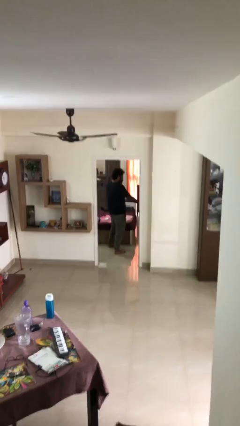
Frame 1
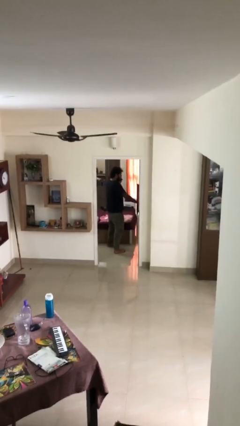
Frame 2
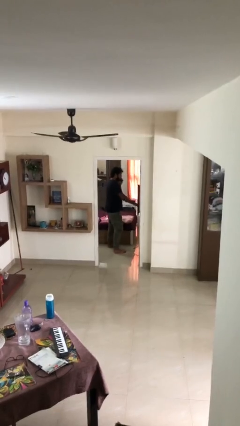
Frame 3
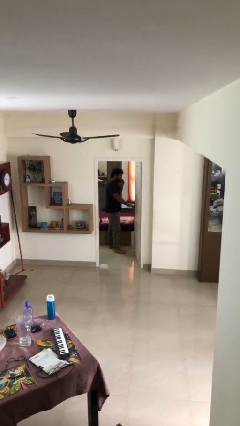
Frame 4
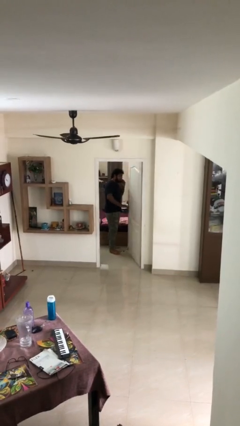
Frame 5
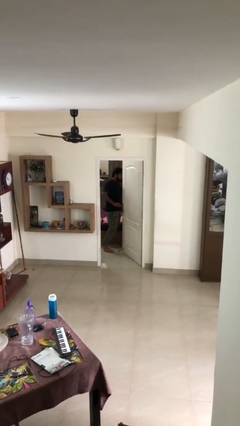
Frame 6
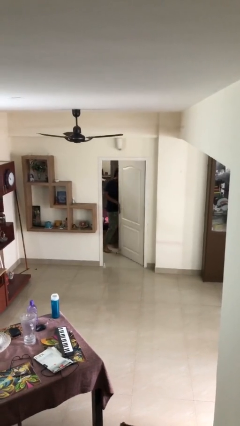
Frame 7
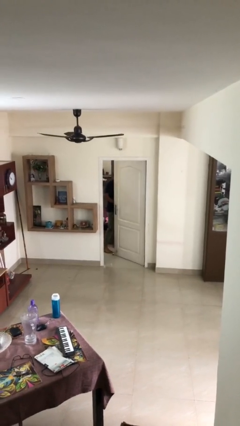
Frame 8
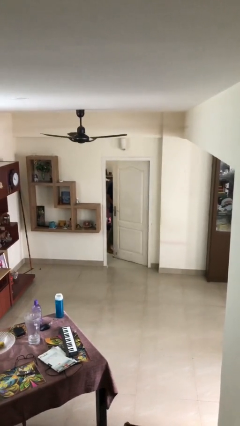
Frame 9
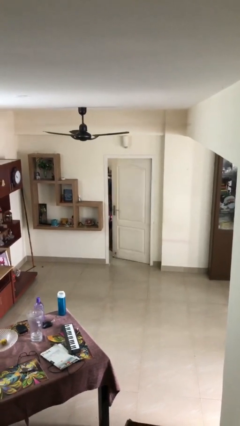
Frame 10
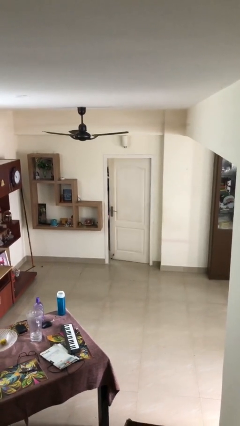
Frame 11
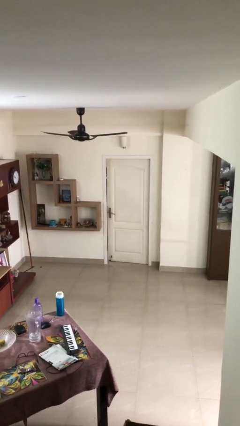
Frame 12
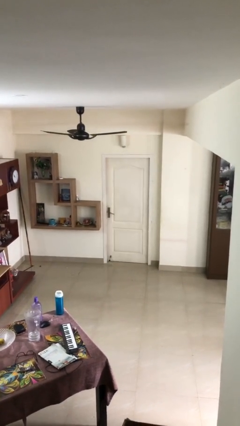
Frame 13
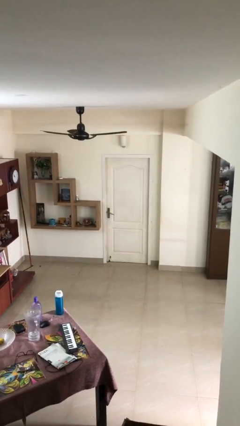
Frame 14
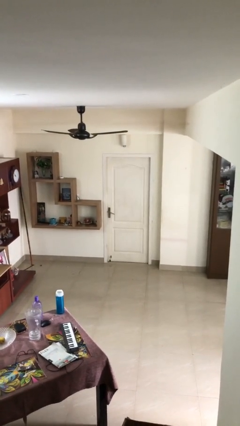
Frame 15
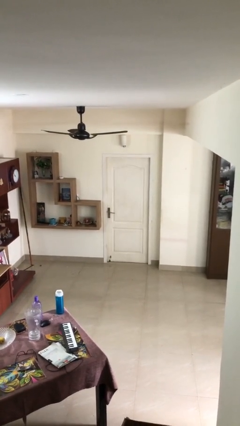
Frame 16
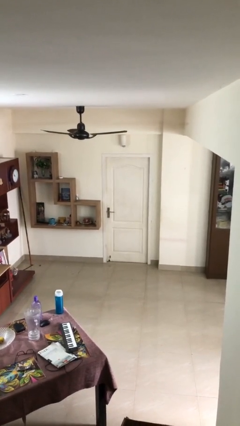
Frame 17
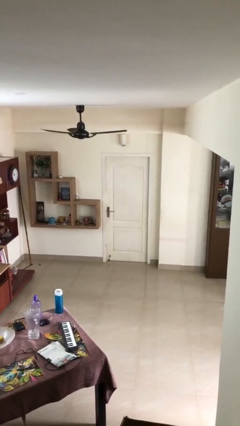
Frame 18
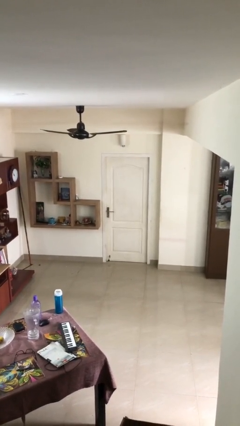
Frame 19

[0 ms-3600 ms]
person closes facility door

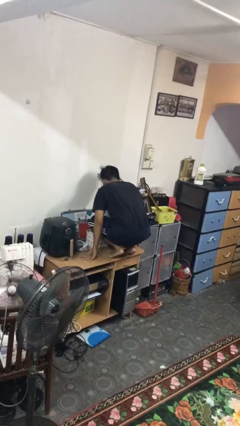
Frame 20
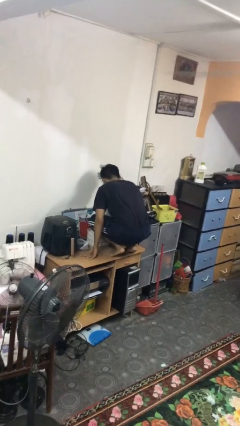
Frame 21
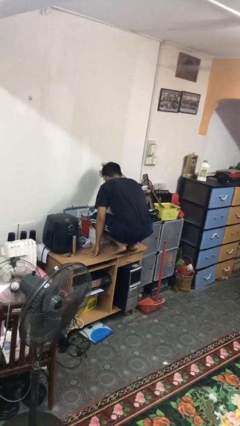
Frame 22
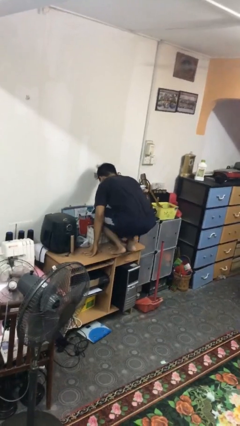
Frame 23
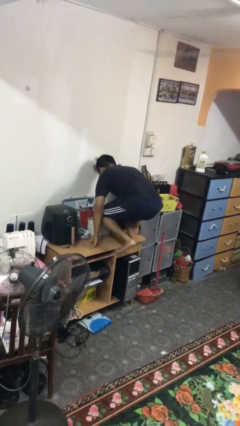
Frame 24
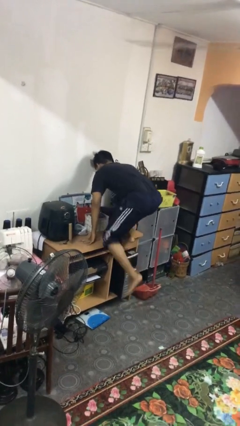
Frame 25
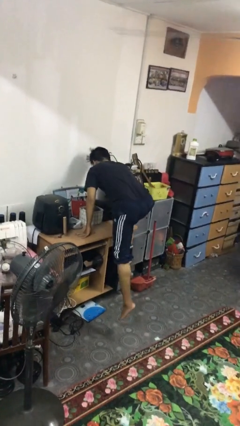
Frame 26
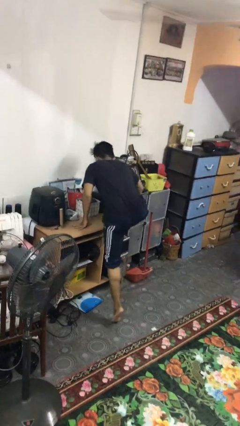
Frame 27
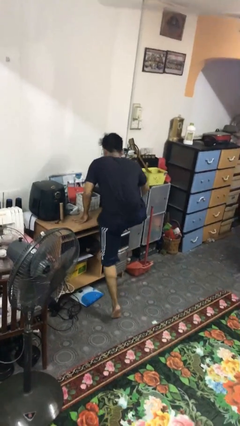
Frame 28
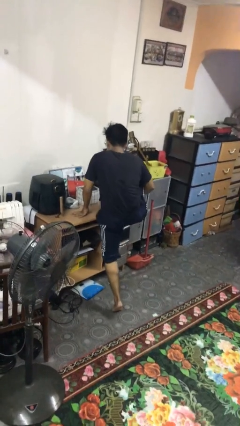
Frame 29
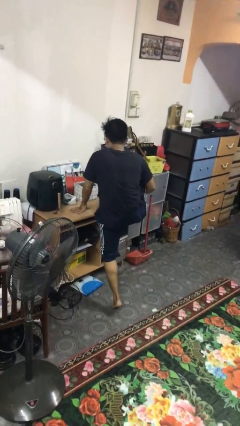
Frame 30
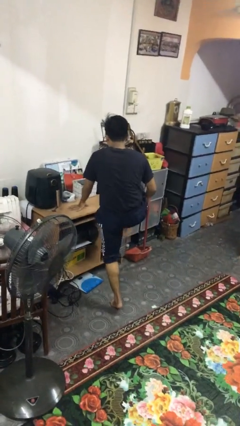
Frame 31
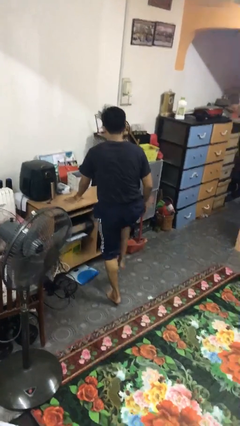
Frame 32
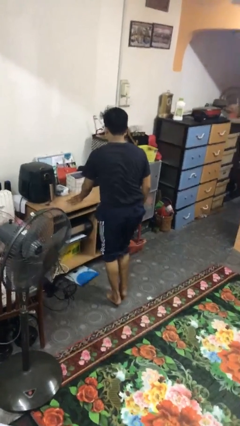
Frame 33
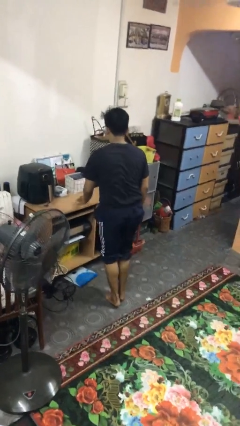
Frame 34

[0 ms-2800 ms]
person climbs off table

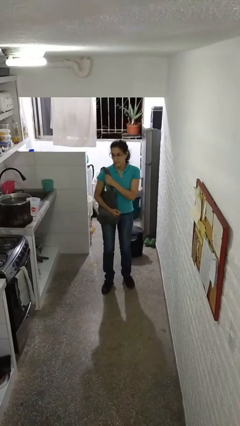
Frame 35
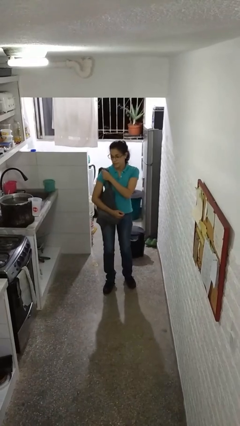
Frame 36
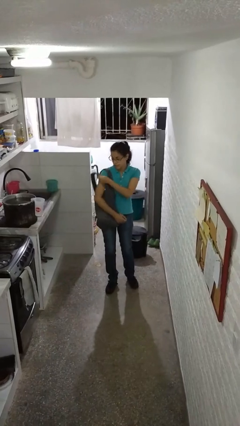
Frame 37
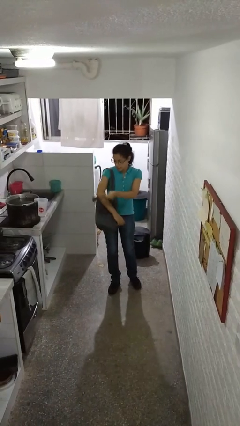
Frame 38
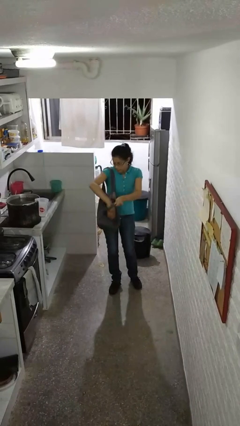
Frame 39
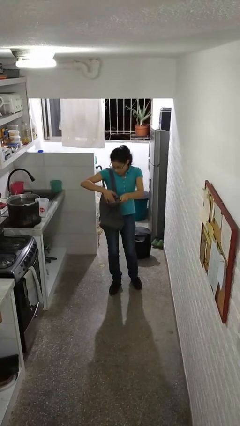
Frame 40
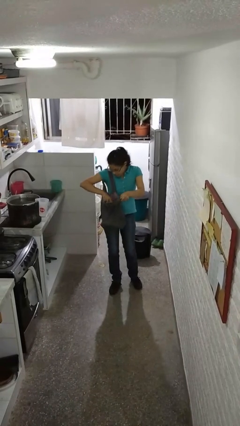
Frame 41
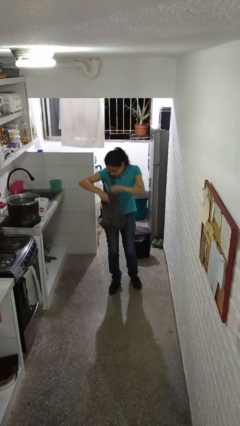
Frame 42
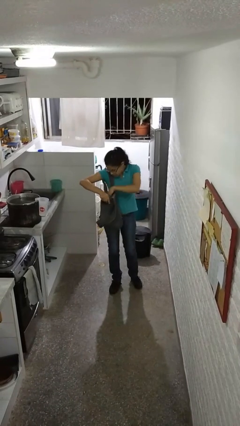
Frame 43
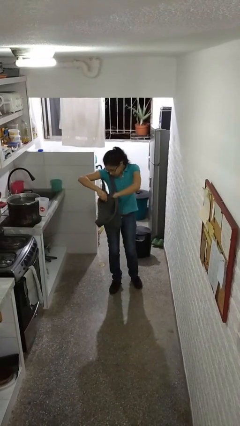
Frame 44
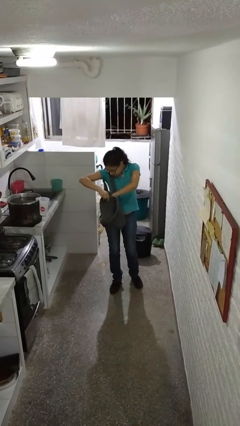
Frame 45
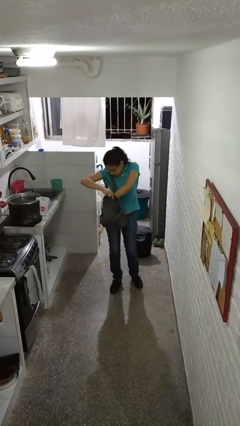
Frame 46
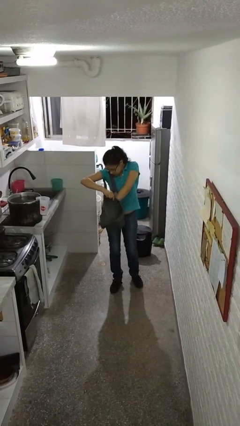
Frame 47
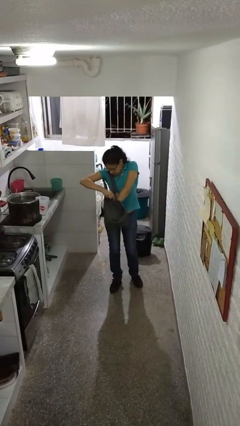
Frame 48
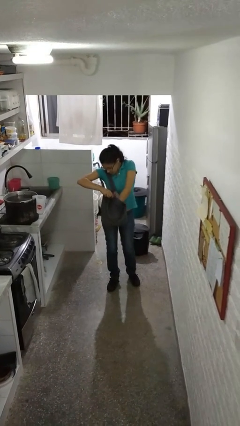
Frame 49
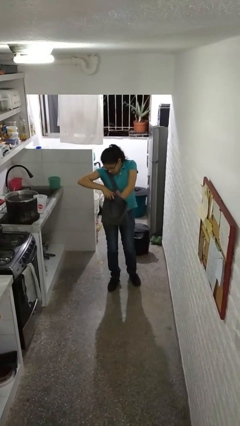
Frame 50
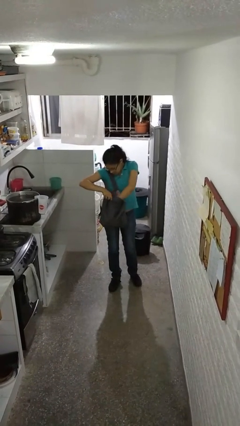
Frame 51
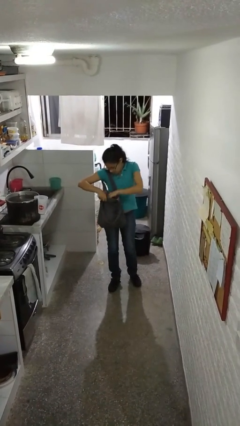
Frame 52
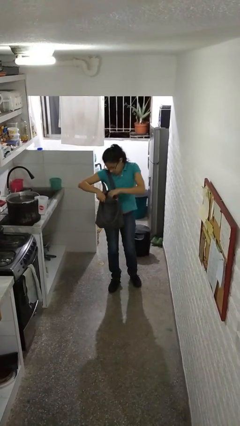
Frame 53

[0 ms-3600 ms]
person searches in purse

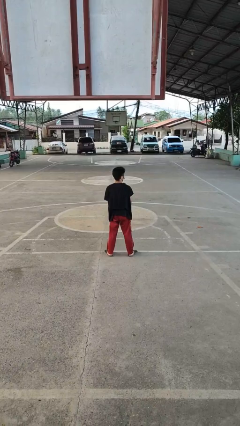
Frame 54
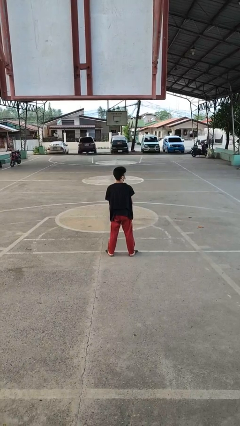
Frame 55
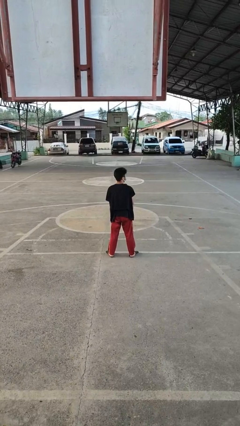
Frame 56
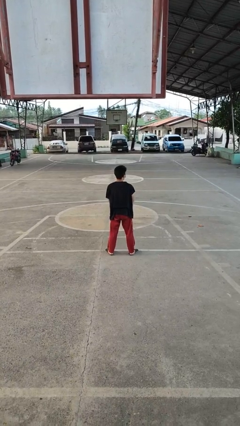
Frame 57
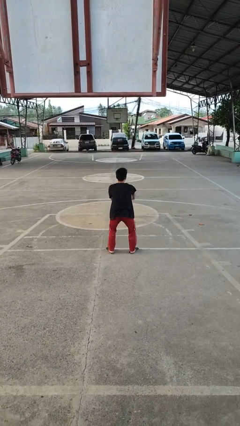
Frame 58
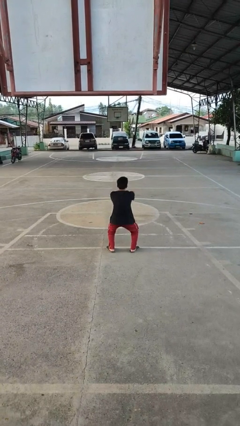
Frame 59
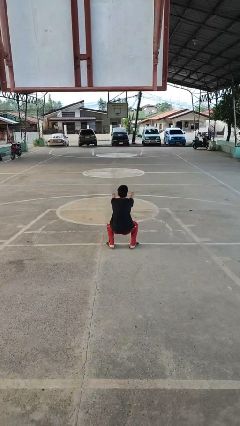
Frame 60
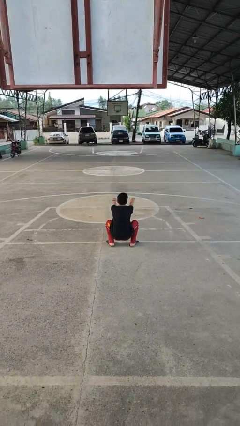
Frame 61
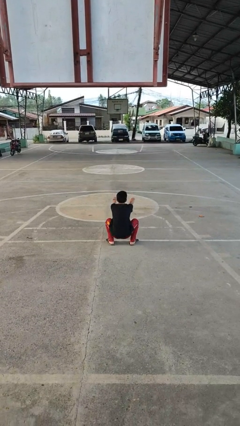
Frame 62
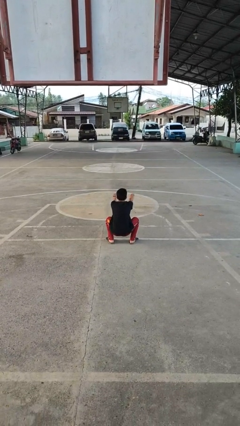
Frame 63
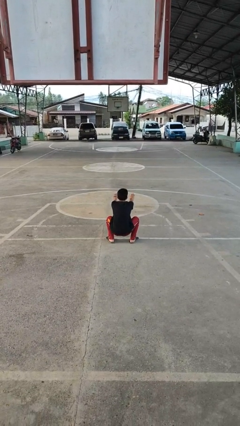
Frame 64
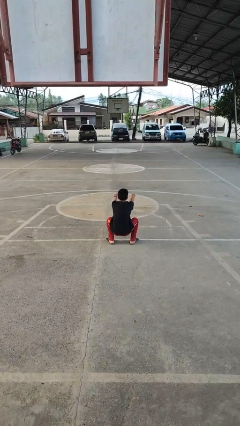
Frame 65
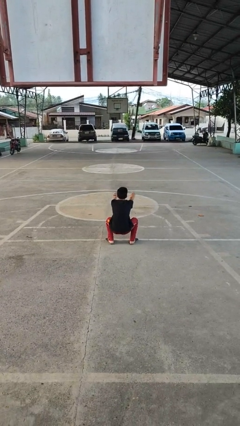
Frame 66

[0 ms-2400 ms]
person squats

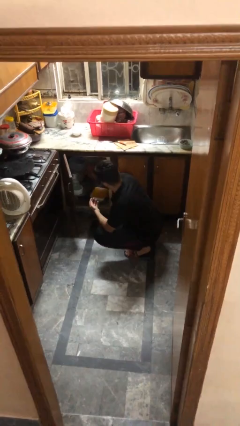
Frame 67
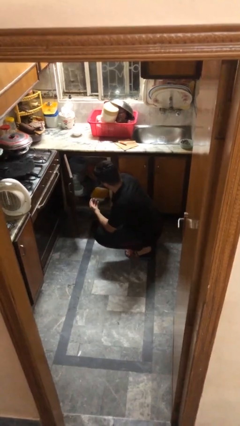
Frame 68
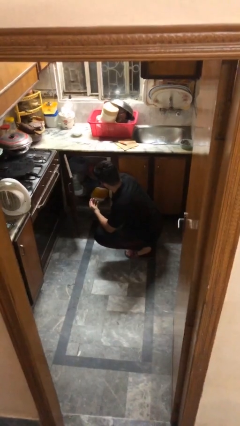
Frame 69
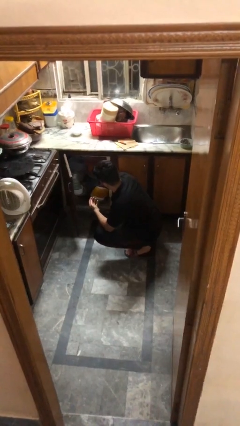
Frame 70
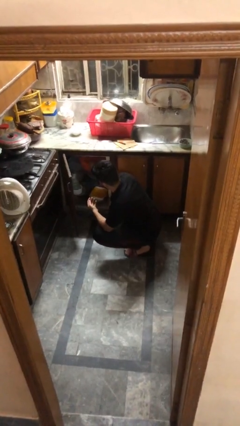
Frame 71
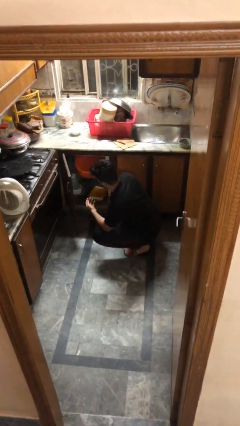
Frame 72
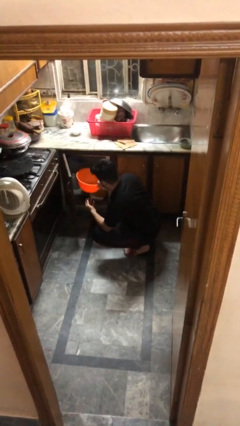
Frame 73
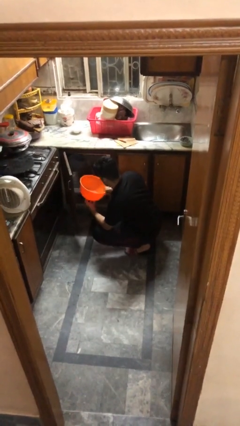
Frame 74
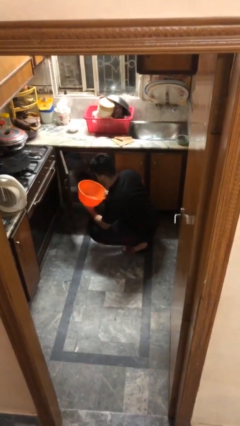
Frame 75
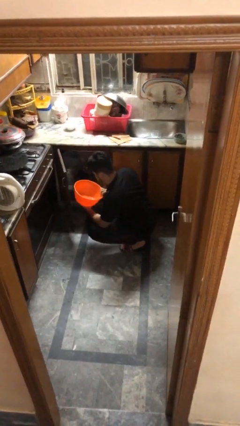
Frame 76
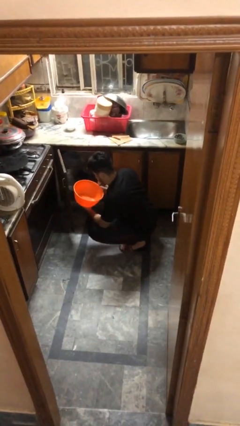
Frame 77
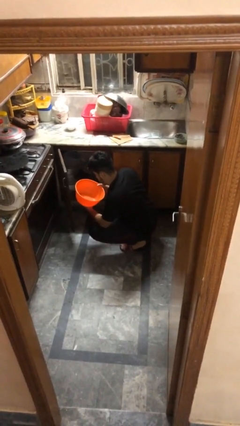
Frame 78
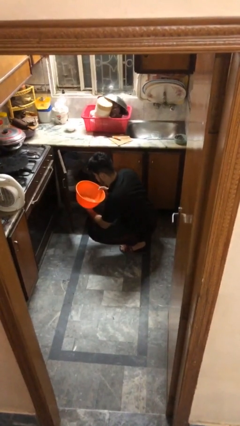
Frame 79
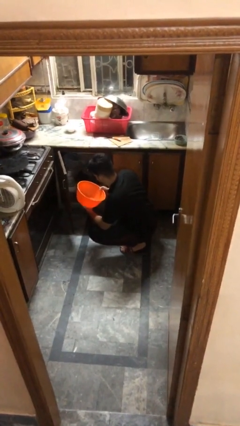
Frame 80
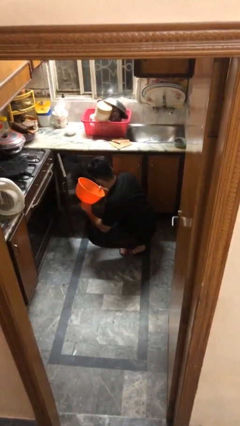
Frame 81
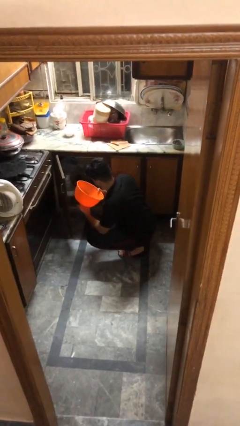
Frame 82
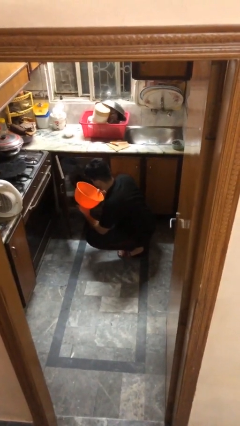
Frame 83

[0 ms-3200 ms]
person takes object from kitchen drawer

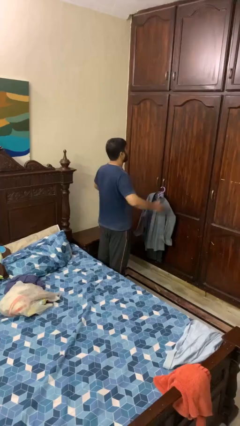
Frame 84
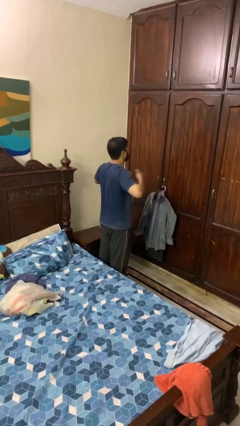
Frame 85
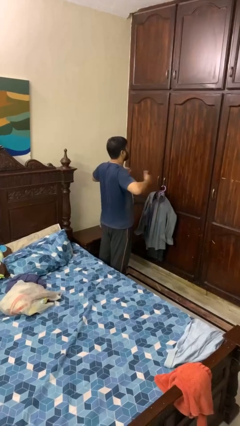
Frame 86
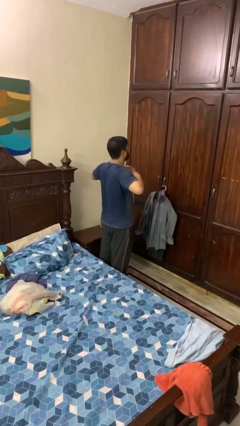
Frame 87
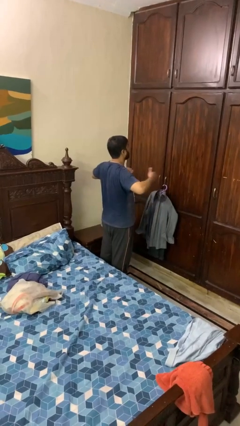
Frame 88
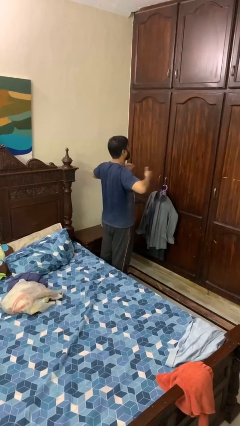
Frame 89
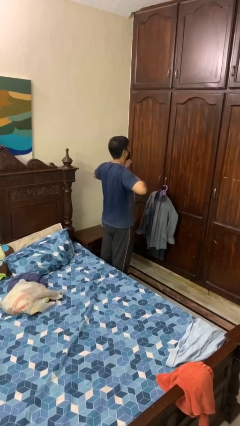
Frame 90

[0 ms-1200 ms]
person drums on chest

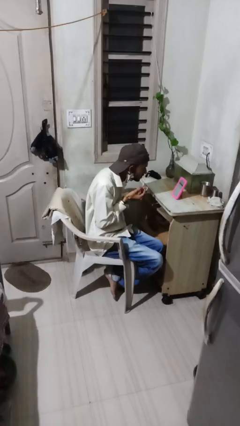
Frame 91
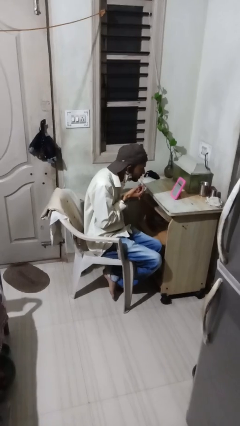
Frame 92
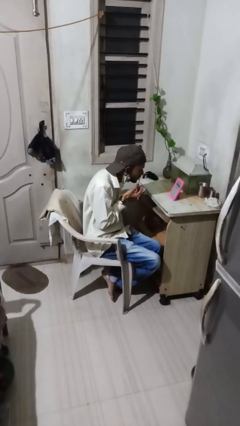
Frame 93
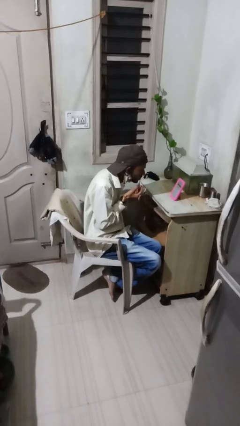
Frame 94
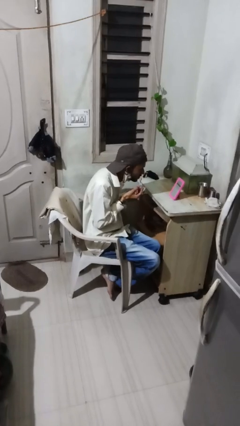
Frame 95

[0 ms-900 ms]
person applies lip makeup
